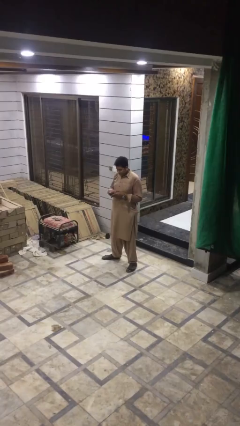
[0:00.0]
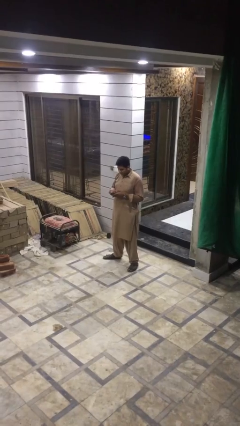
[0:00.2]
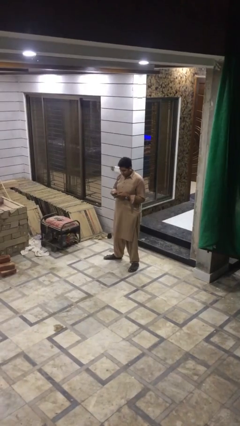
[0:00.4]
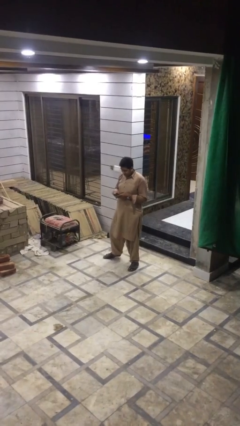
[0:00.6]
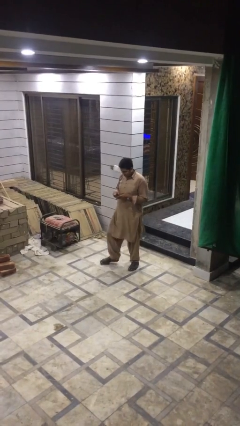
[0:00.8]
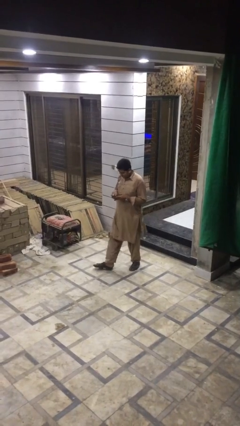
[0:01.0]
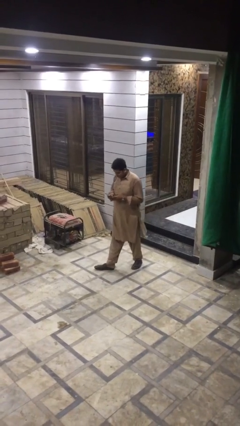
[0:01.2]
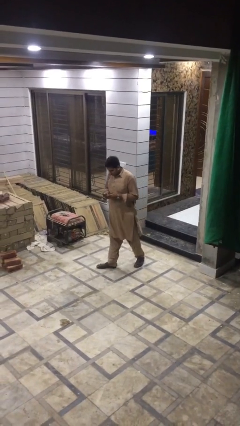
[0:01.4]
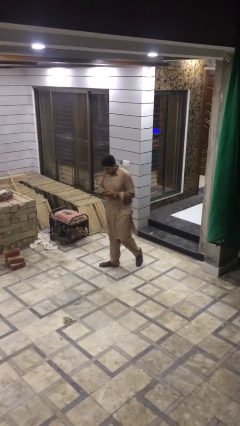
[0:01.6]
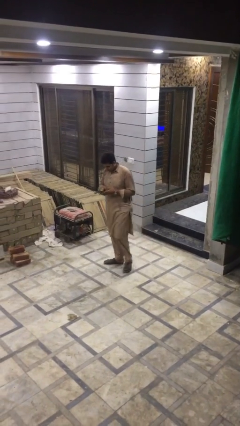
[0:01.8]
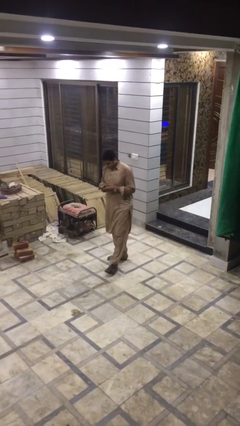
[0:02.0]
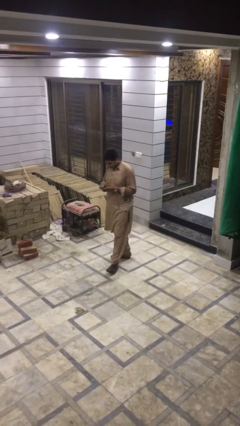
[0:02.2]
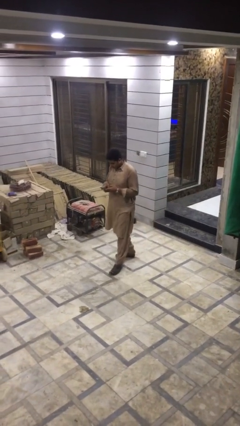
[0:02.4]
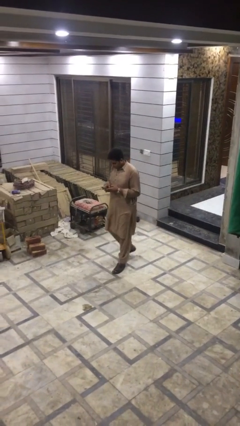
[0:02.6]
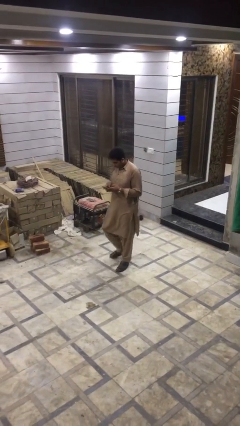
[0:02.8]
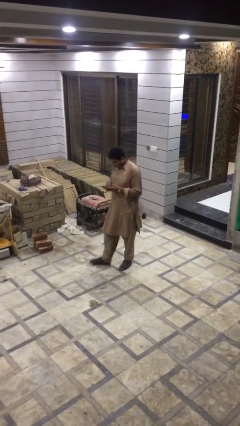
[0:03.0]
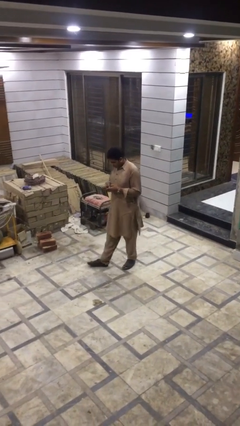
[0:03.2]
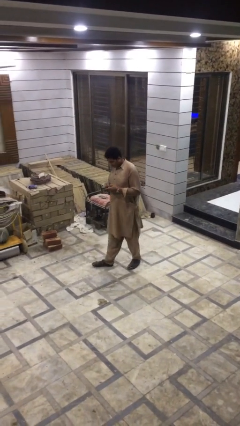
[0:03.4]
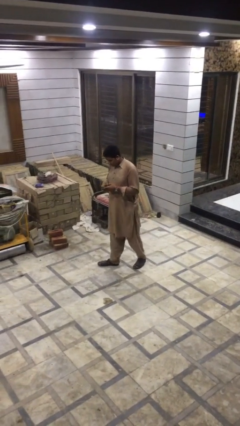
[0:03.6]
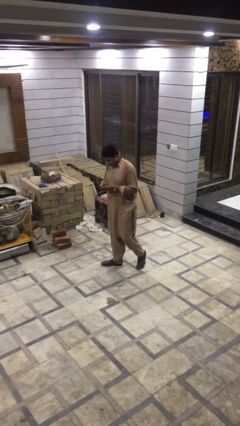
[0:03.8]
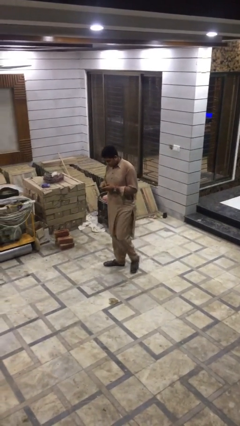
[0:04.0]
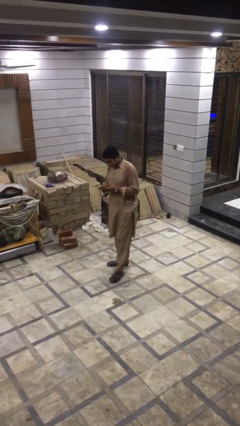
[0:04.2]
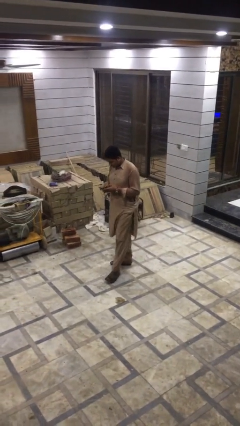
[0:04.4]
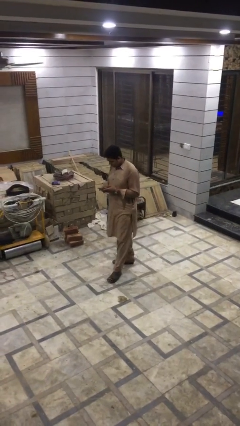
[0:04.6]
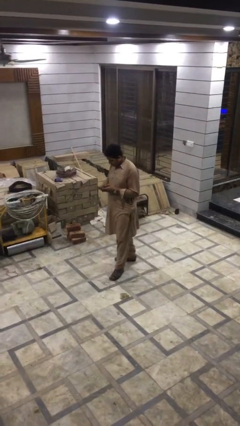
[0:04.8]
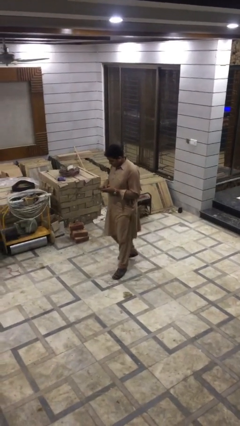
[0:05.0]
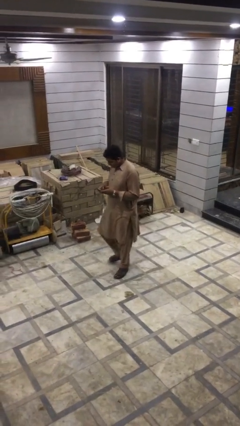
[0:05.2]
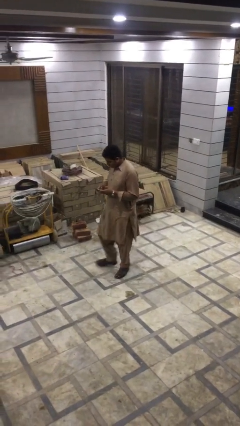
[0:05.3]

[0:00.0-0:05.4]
person texts on phone

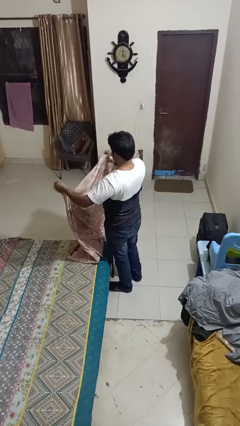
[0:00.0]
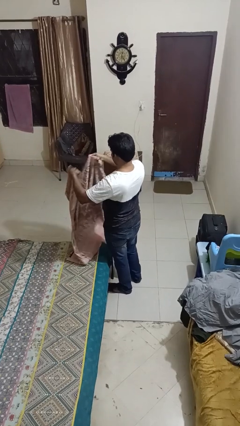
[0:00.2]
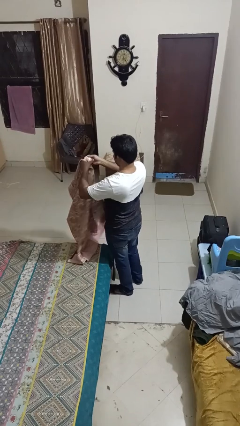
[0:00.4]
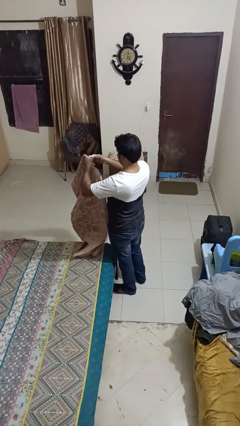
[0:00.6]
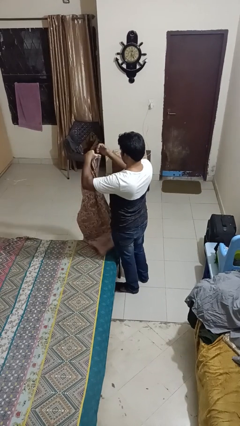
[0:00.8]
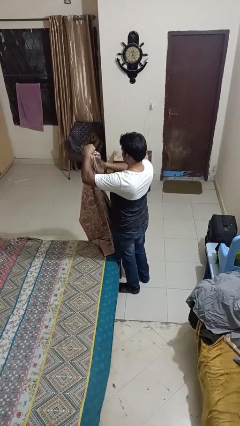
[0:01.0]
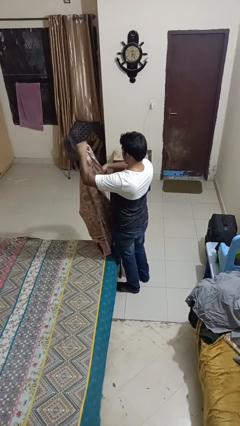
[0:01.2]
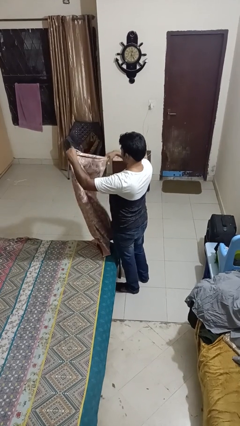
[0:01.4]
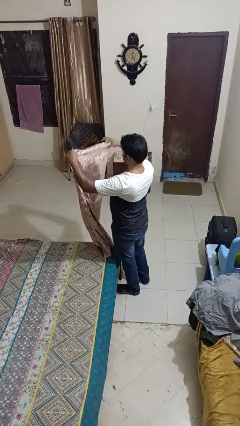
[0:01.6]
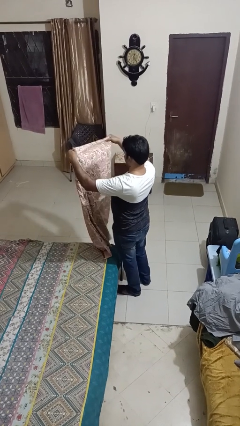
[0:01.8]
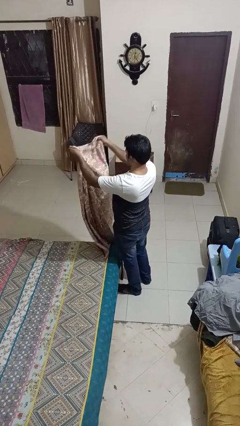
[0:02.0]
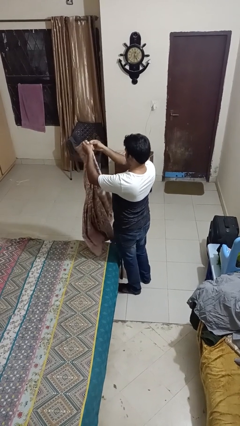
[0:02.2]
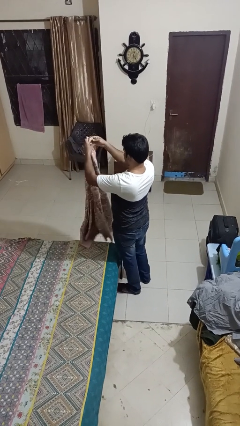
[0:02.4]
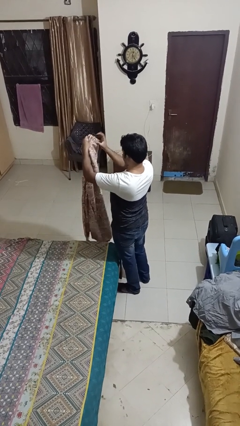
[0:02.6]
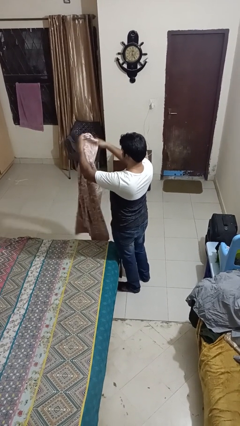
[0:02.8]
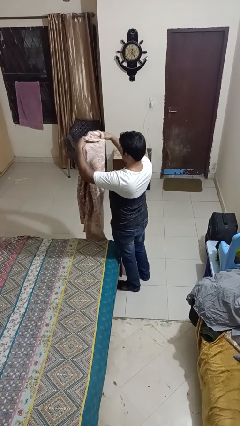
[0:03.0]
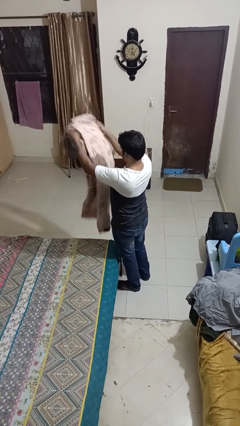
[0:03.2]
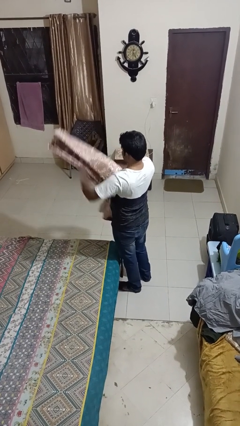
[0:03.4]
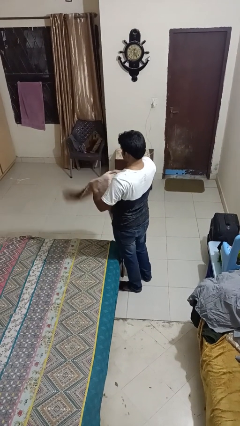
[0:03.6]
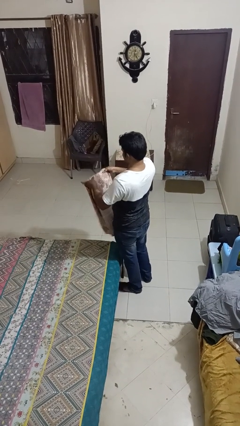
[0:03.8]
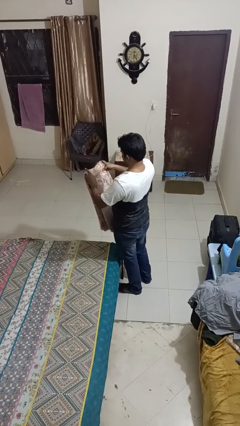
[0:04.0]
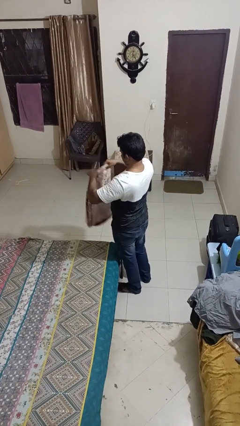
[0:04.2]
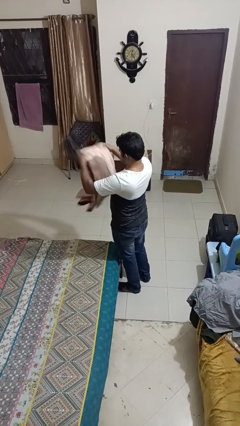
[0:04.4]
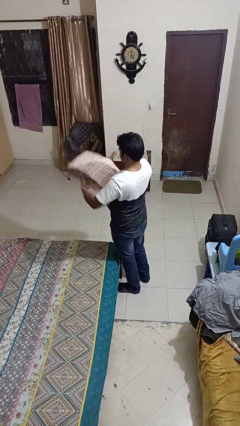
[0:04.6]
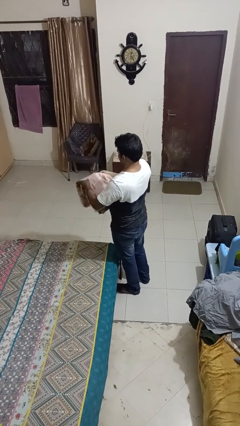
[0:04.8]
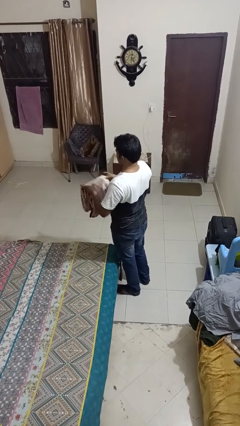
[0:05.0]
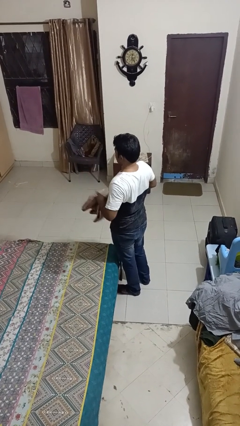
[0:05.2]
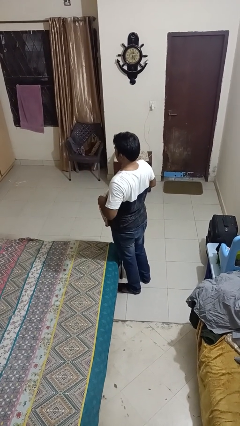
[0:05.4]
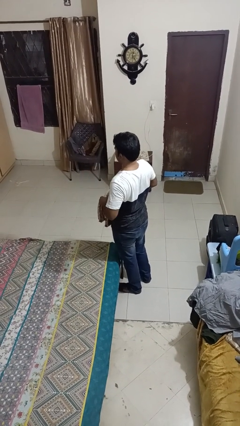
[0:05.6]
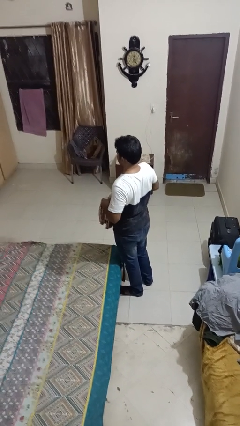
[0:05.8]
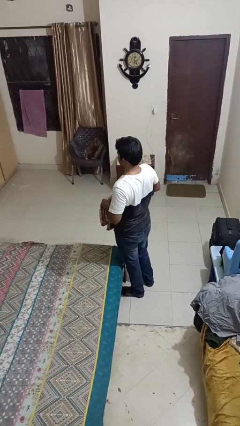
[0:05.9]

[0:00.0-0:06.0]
person folds blanket

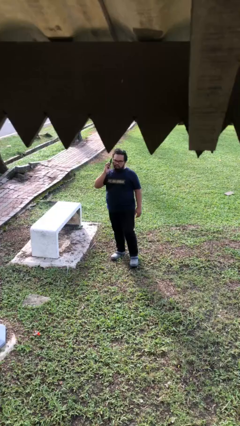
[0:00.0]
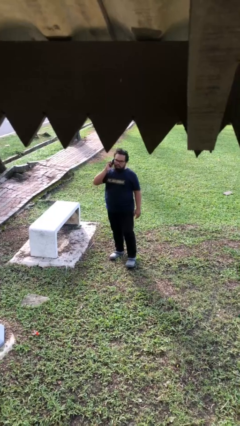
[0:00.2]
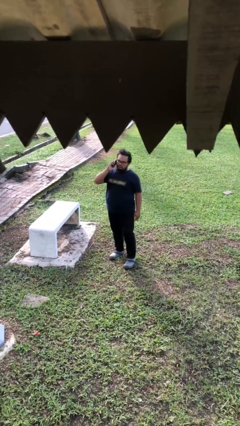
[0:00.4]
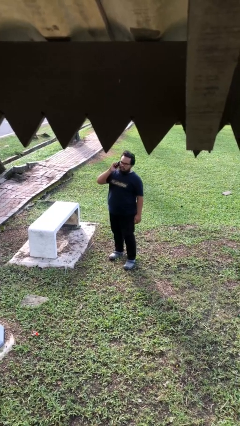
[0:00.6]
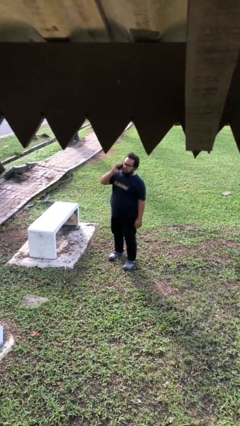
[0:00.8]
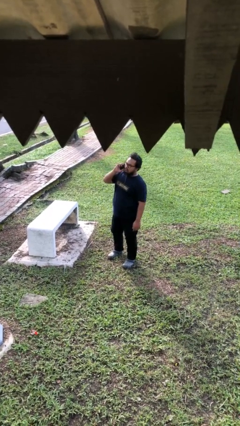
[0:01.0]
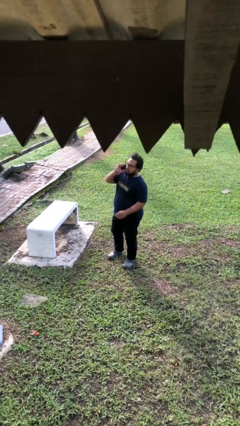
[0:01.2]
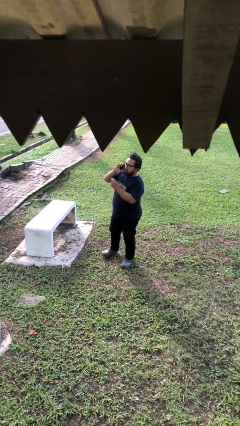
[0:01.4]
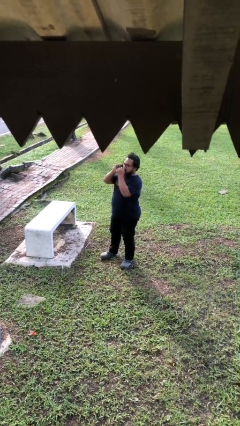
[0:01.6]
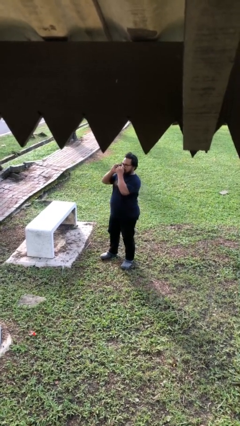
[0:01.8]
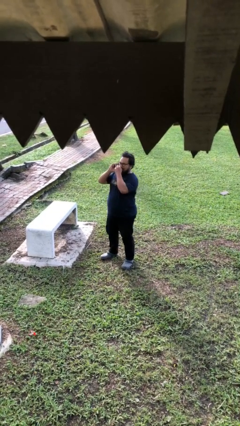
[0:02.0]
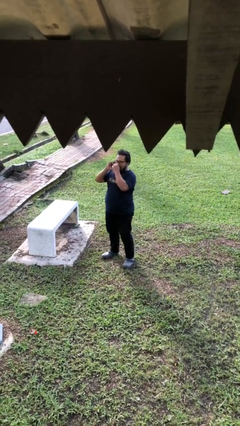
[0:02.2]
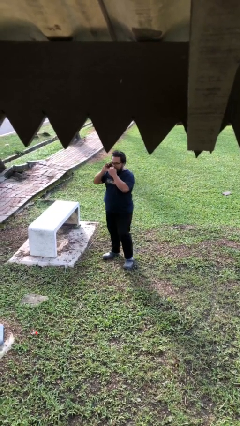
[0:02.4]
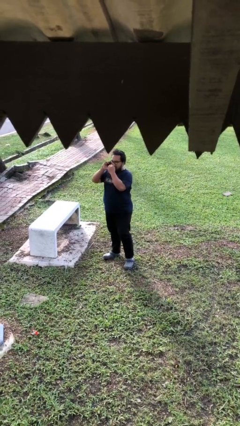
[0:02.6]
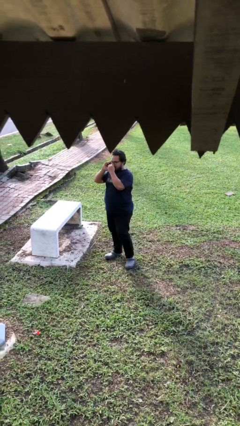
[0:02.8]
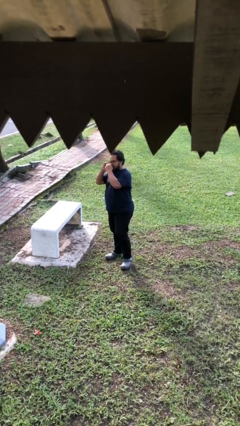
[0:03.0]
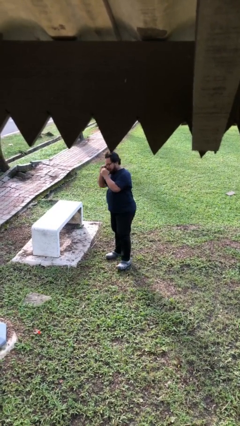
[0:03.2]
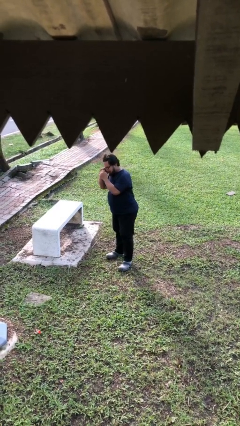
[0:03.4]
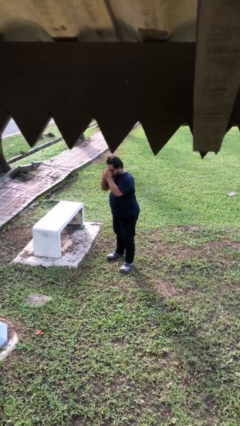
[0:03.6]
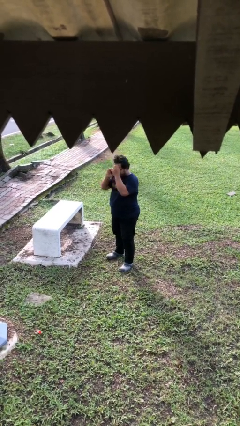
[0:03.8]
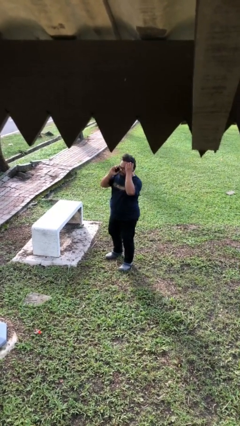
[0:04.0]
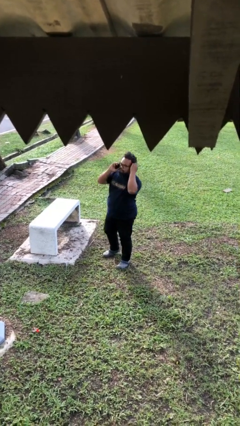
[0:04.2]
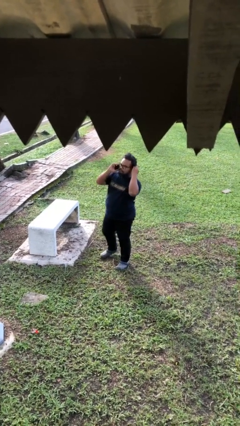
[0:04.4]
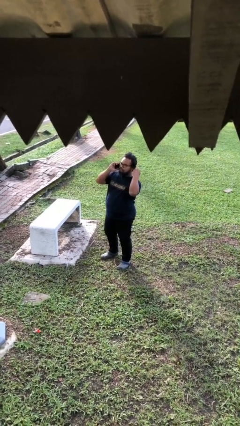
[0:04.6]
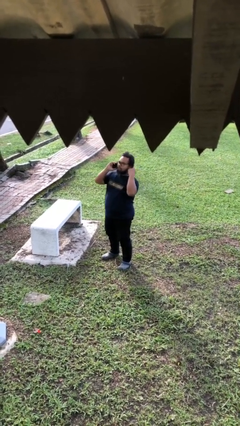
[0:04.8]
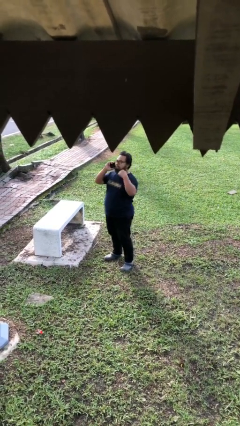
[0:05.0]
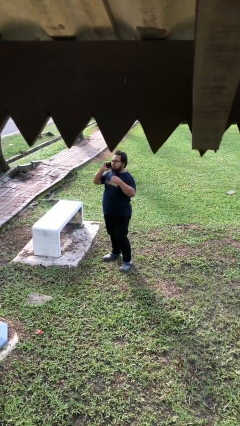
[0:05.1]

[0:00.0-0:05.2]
person talks on phone

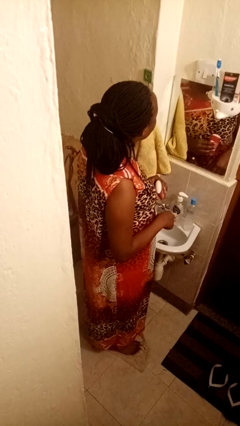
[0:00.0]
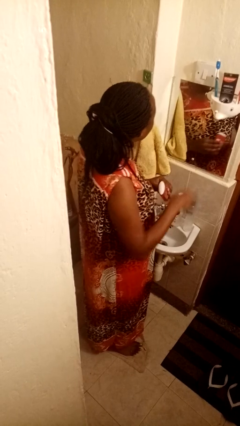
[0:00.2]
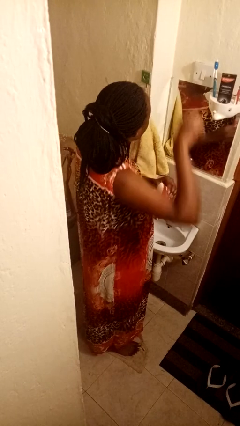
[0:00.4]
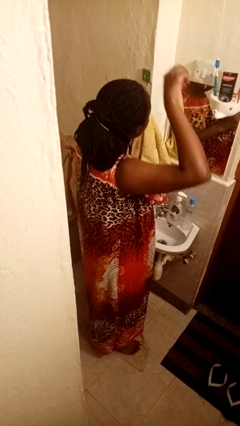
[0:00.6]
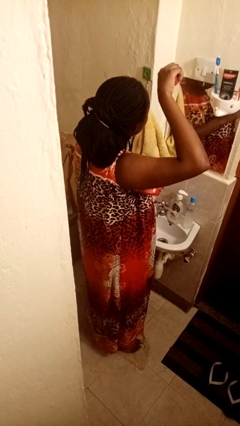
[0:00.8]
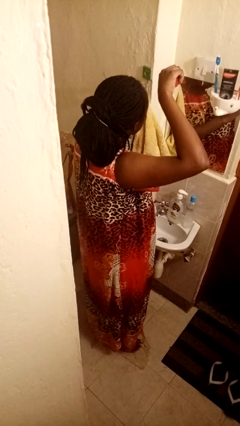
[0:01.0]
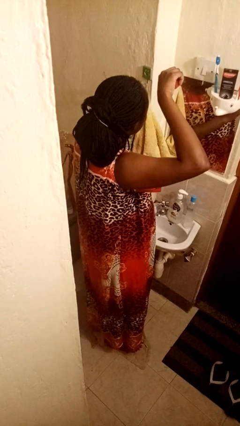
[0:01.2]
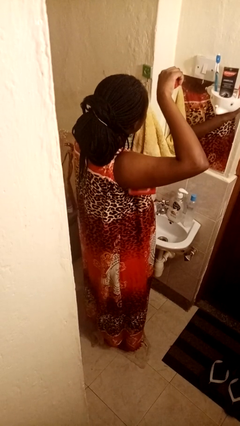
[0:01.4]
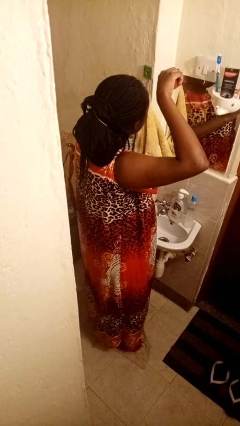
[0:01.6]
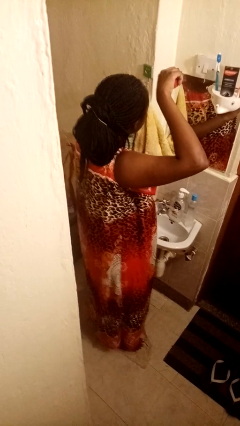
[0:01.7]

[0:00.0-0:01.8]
person applies deodorant
